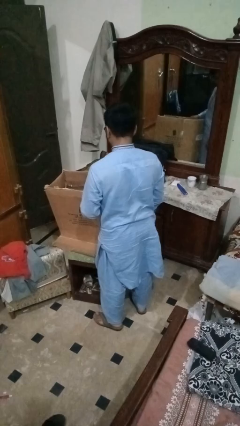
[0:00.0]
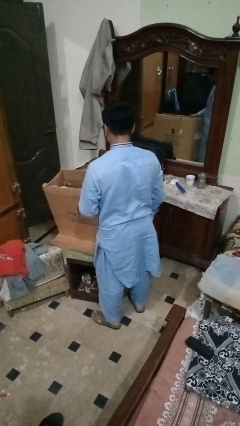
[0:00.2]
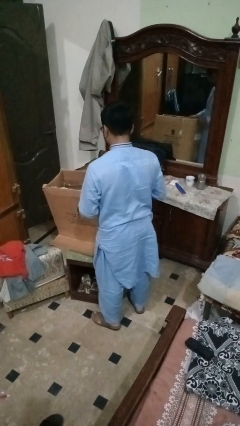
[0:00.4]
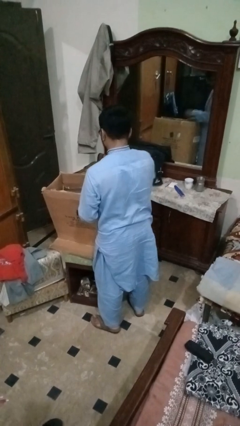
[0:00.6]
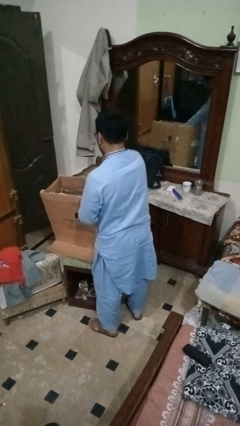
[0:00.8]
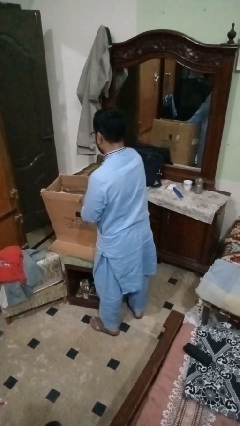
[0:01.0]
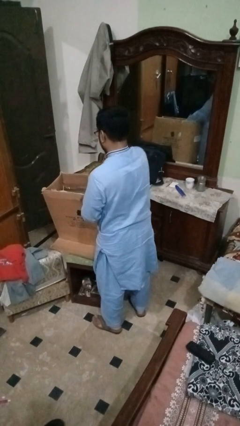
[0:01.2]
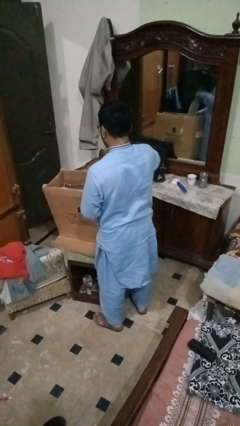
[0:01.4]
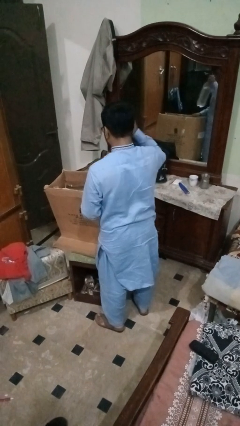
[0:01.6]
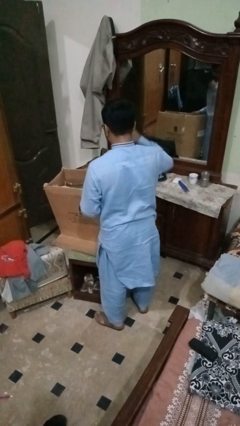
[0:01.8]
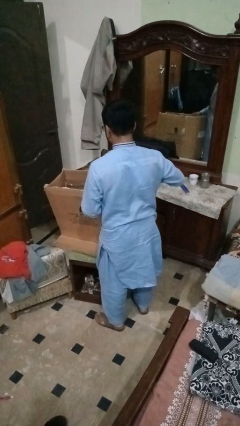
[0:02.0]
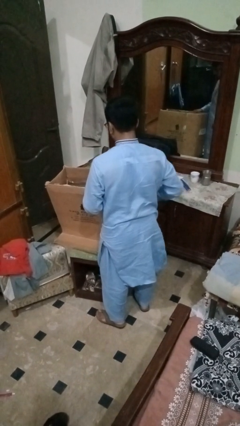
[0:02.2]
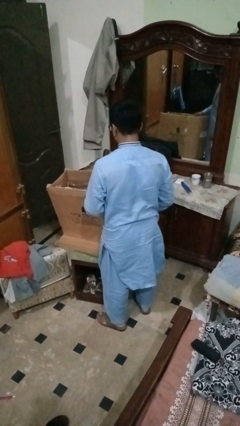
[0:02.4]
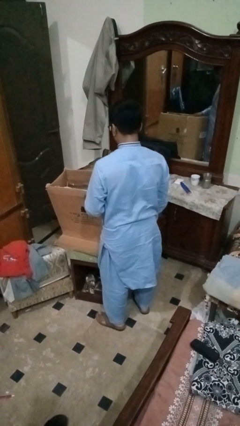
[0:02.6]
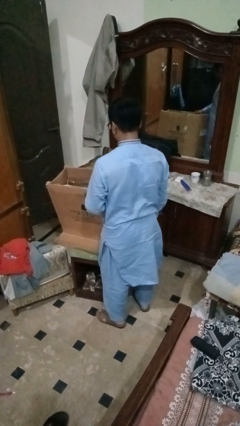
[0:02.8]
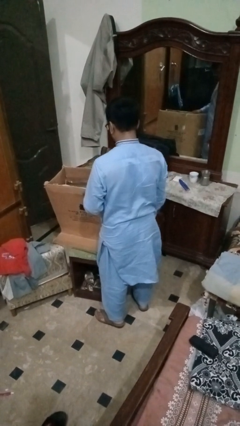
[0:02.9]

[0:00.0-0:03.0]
person takes object from box

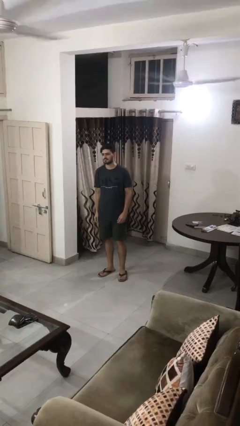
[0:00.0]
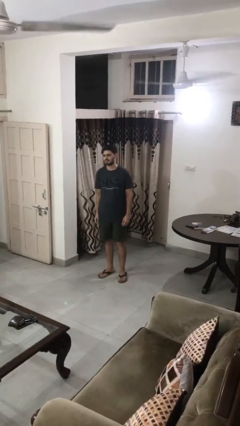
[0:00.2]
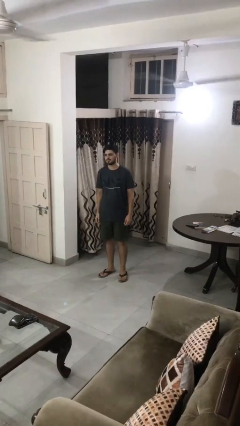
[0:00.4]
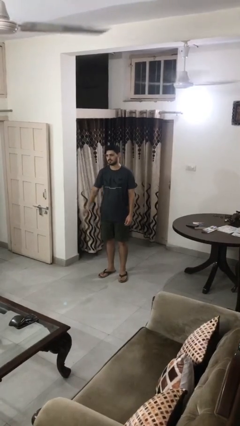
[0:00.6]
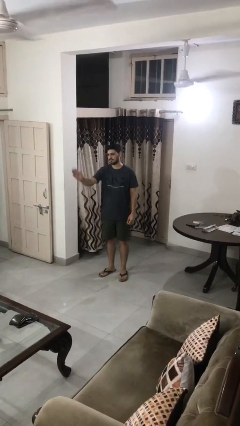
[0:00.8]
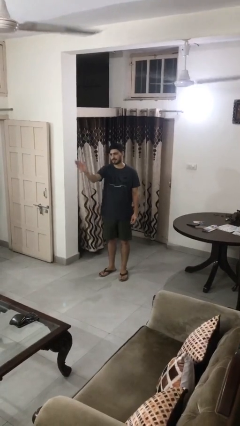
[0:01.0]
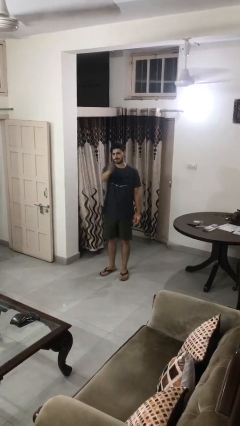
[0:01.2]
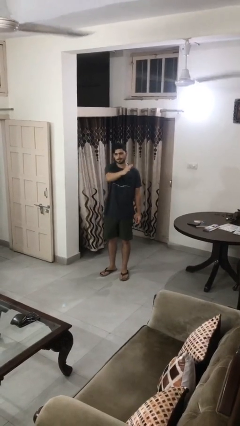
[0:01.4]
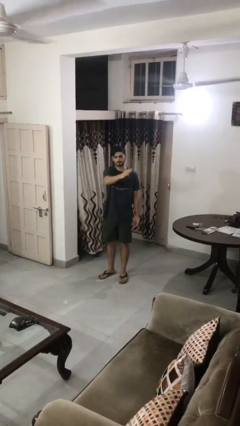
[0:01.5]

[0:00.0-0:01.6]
person gestures swipe left

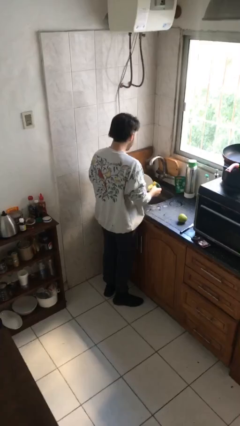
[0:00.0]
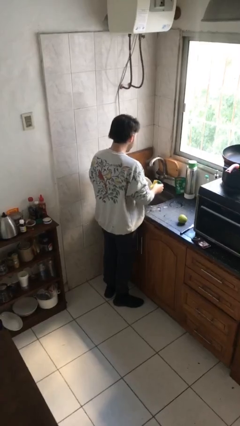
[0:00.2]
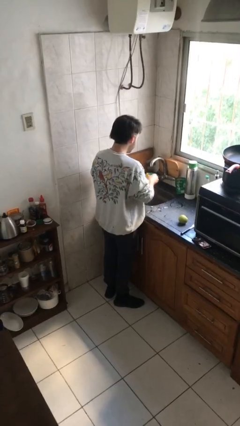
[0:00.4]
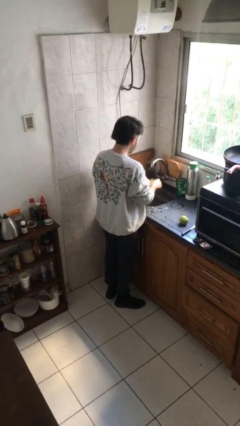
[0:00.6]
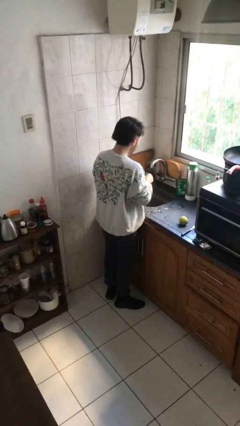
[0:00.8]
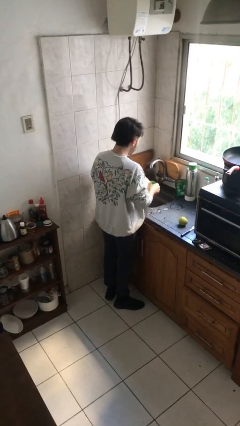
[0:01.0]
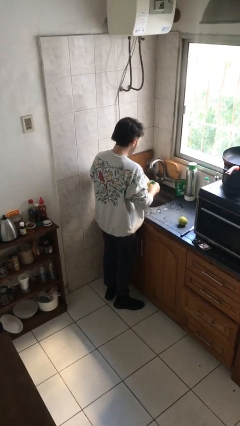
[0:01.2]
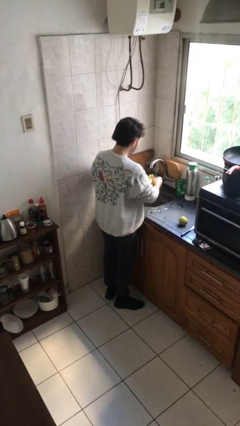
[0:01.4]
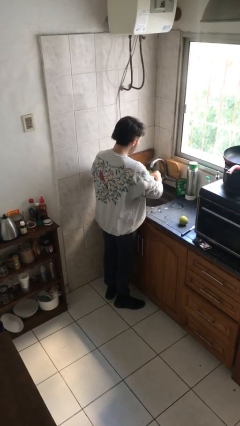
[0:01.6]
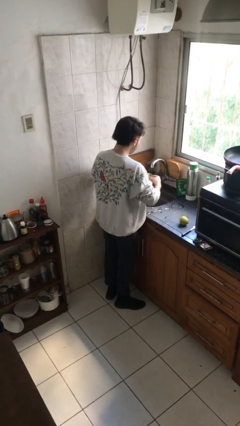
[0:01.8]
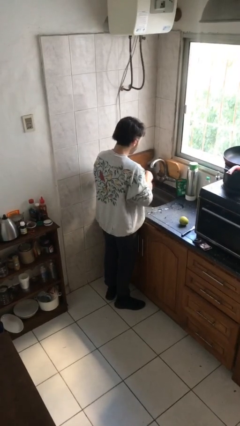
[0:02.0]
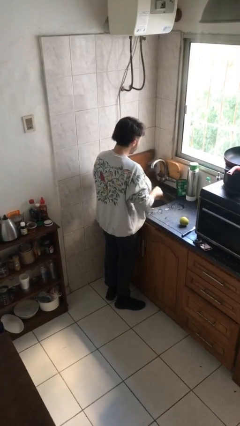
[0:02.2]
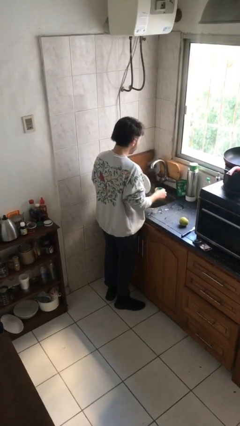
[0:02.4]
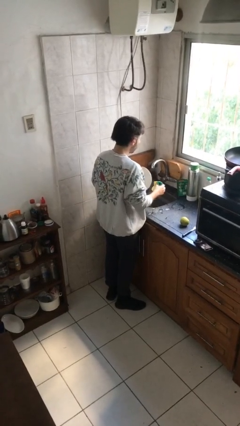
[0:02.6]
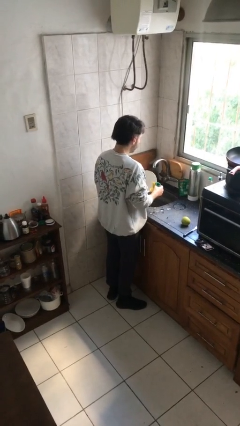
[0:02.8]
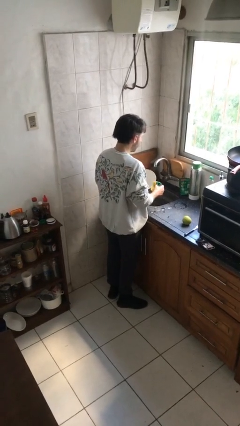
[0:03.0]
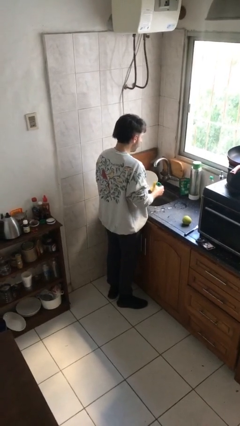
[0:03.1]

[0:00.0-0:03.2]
person washes dish

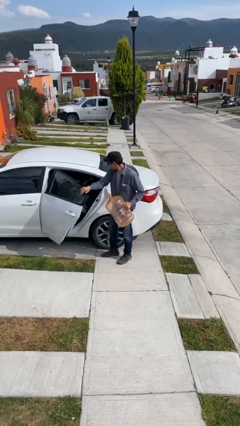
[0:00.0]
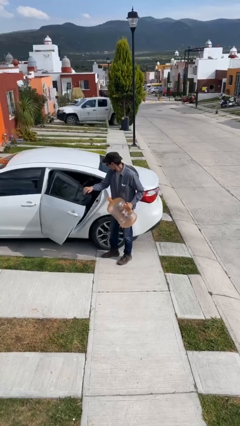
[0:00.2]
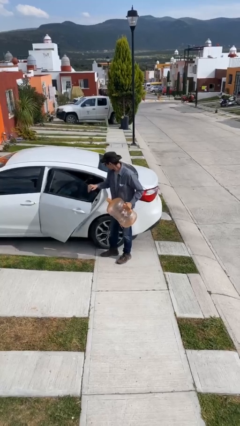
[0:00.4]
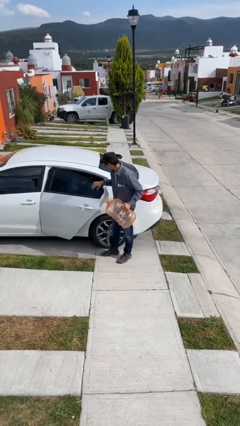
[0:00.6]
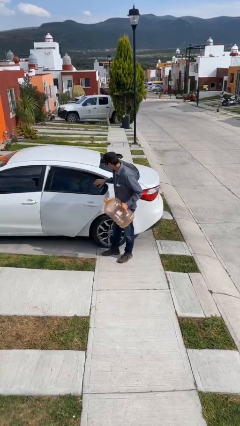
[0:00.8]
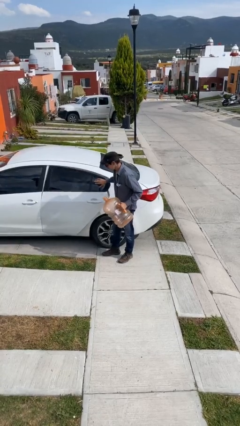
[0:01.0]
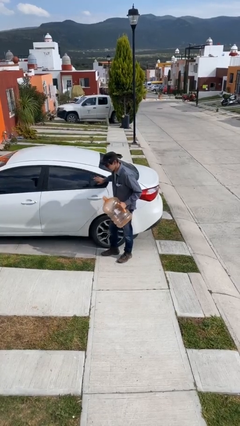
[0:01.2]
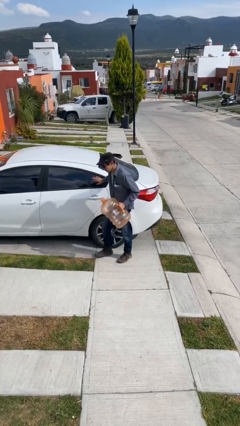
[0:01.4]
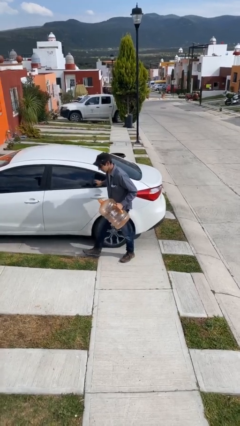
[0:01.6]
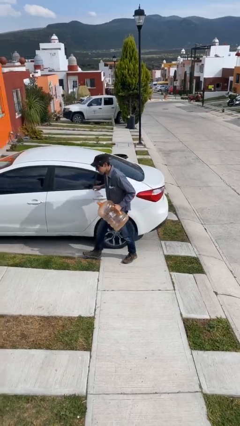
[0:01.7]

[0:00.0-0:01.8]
person closes car door

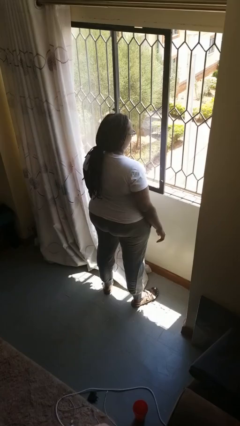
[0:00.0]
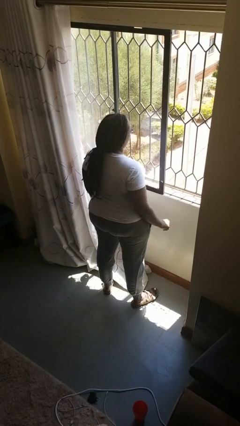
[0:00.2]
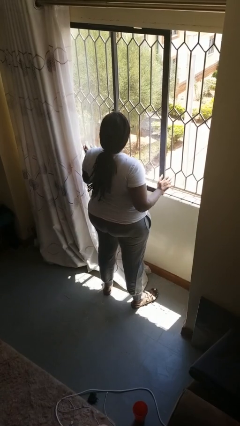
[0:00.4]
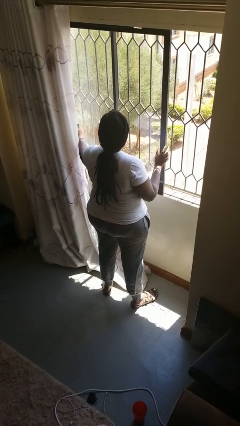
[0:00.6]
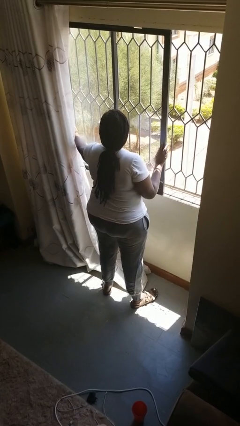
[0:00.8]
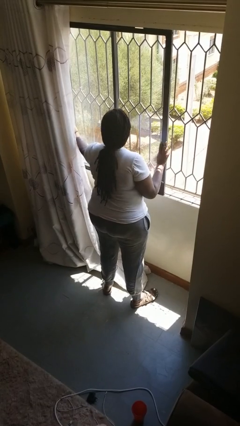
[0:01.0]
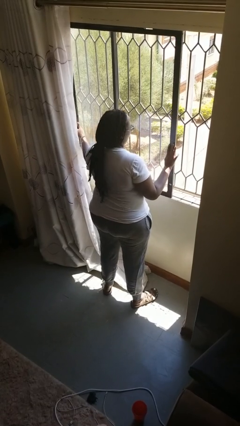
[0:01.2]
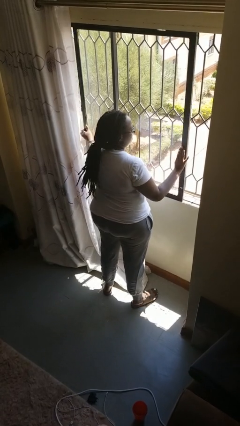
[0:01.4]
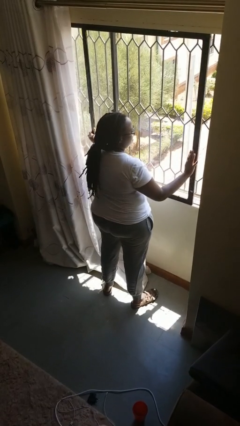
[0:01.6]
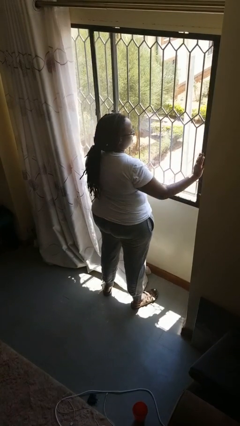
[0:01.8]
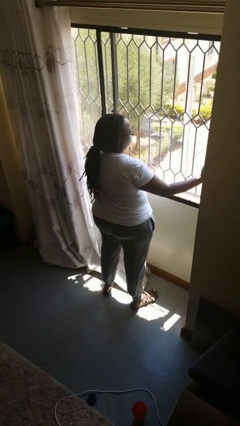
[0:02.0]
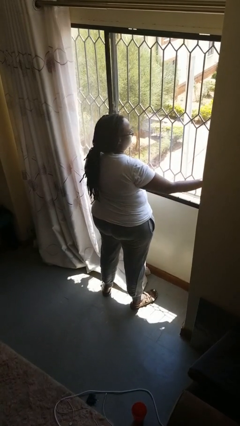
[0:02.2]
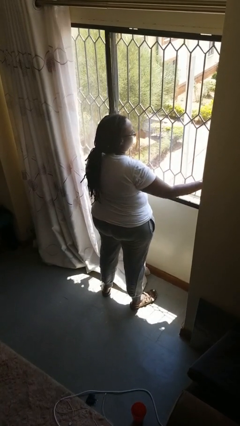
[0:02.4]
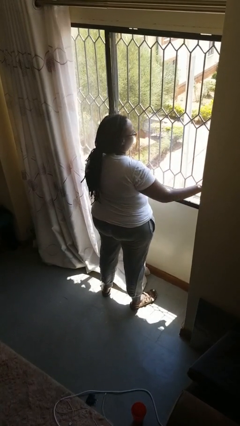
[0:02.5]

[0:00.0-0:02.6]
person closes home window

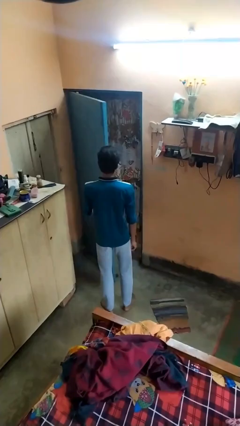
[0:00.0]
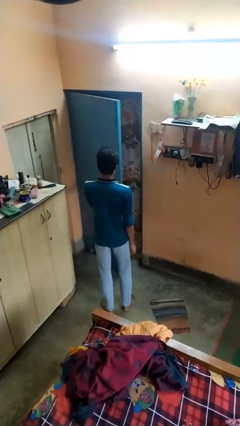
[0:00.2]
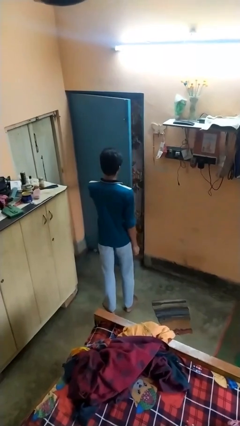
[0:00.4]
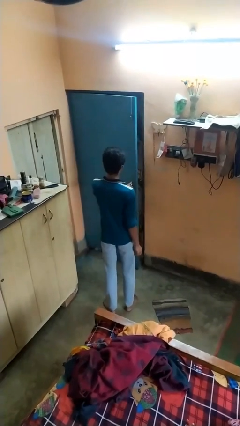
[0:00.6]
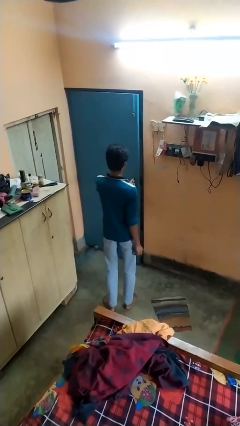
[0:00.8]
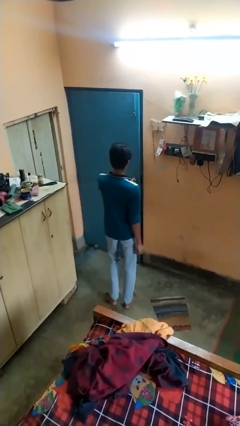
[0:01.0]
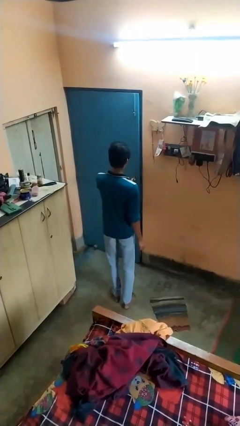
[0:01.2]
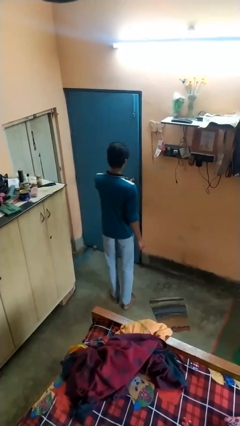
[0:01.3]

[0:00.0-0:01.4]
person closes facility door

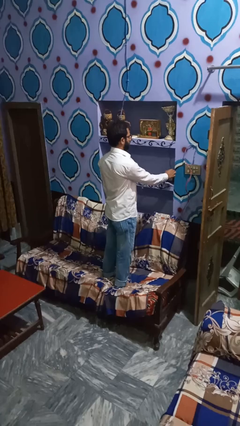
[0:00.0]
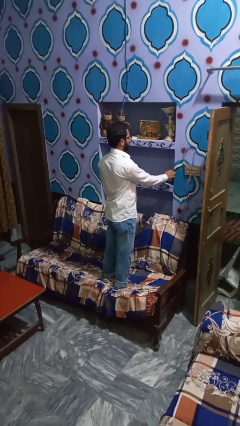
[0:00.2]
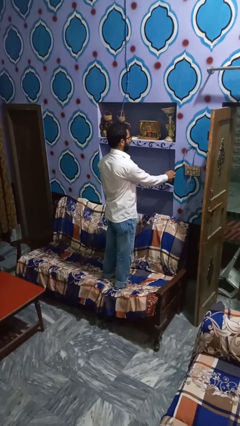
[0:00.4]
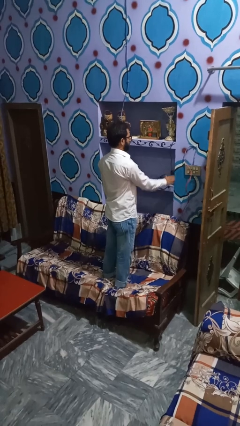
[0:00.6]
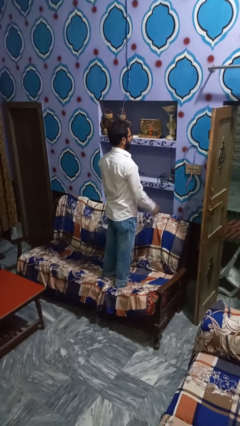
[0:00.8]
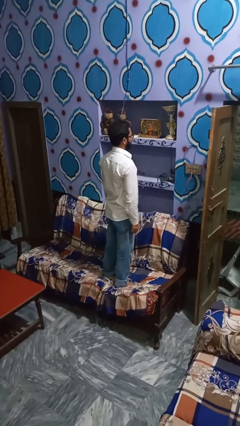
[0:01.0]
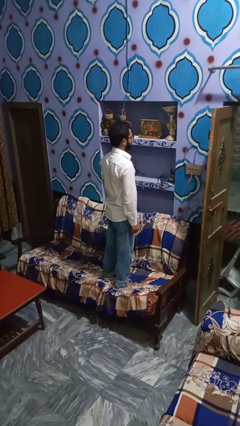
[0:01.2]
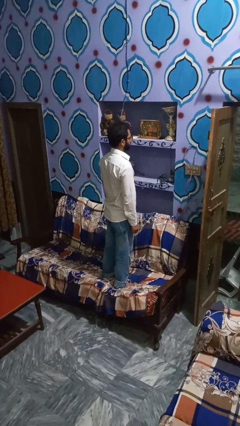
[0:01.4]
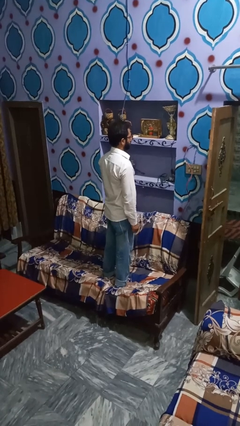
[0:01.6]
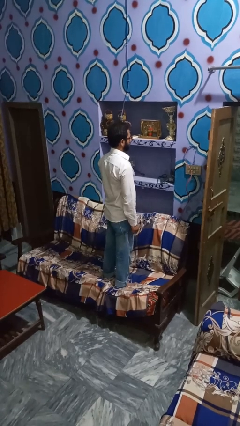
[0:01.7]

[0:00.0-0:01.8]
person turns off lamp

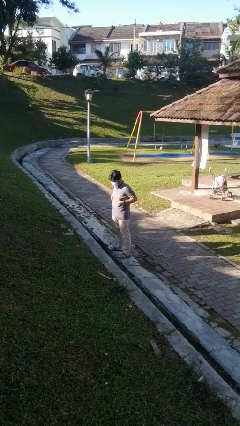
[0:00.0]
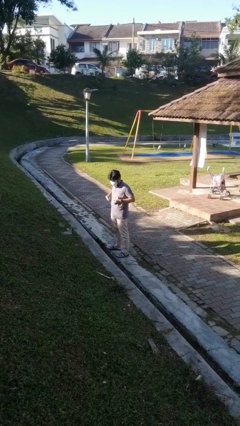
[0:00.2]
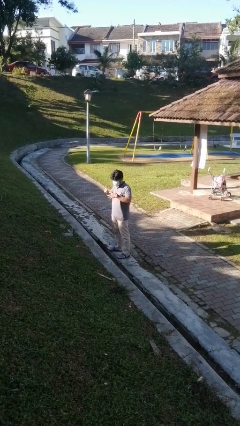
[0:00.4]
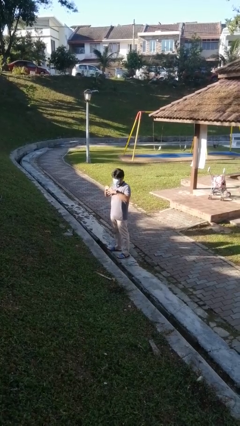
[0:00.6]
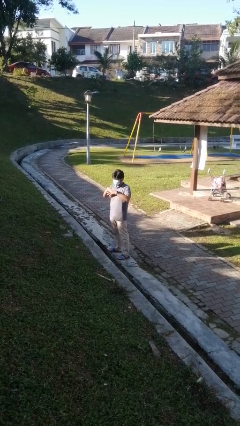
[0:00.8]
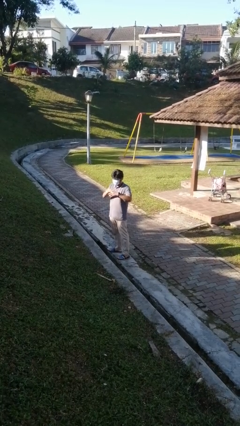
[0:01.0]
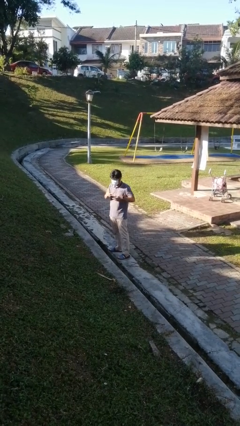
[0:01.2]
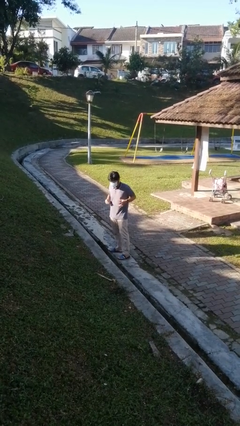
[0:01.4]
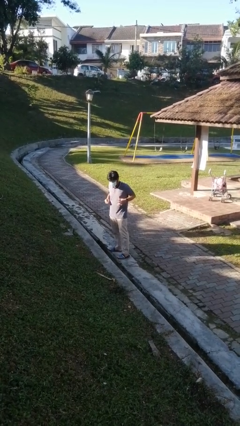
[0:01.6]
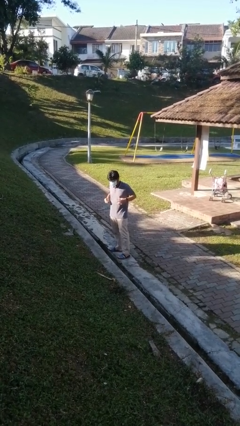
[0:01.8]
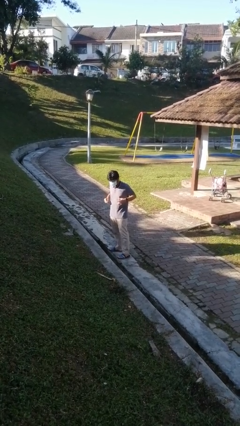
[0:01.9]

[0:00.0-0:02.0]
person puts on ring
